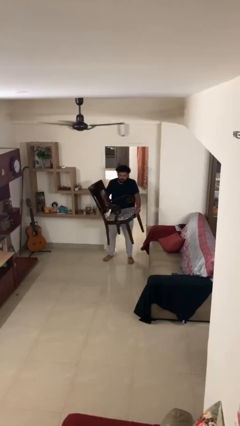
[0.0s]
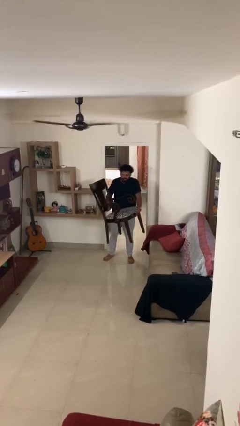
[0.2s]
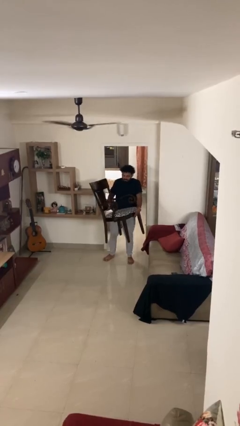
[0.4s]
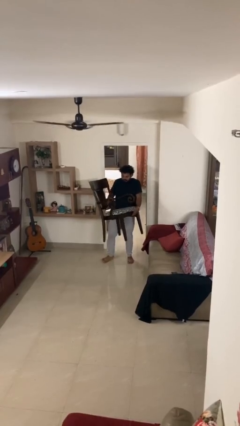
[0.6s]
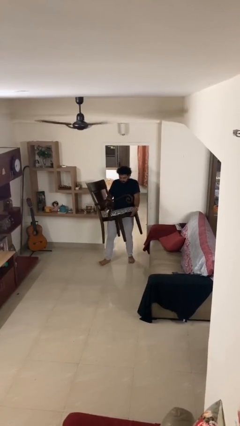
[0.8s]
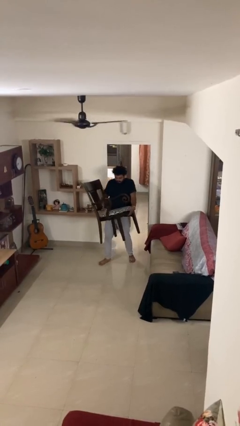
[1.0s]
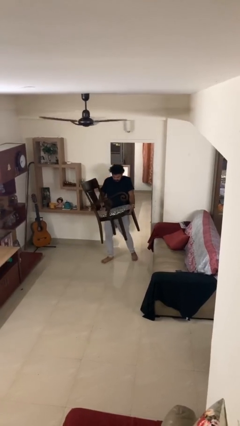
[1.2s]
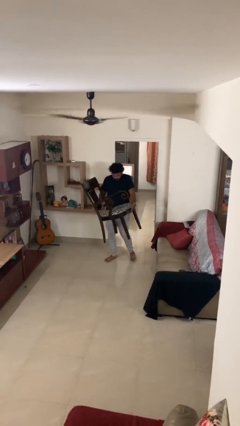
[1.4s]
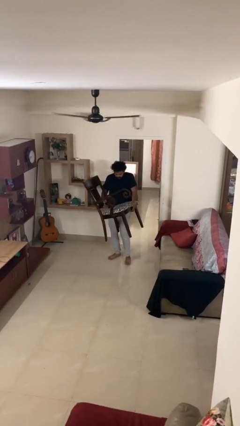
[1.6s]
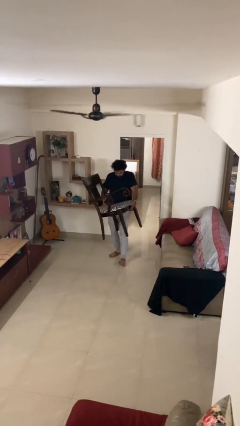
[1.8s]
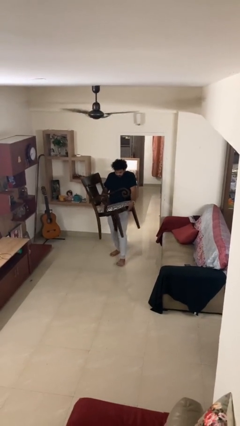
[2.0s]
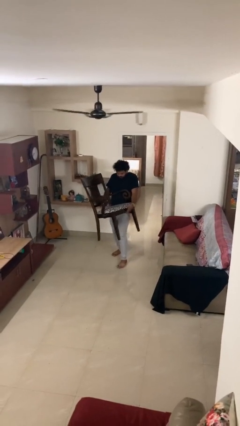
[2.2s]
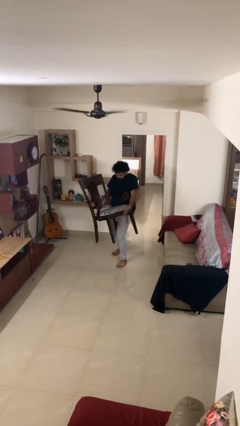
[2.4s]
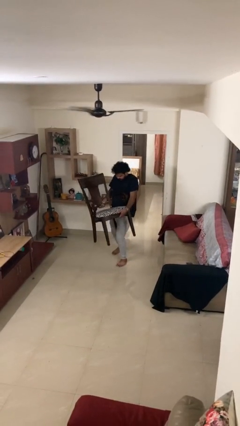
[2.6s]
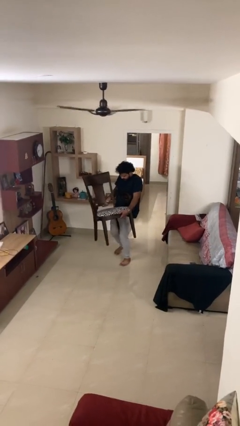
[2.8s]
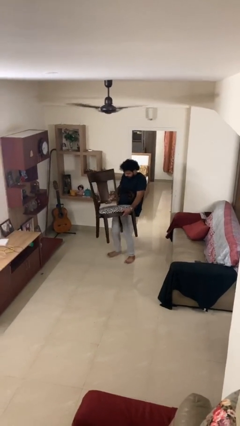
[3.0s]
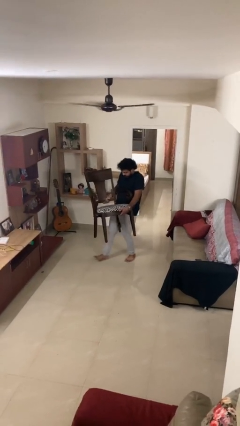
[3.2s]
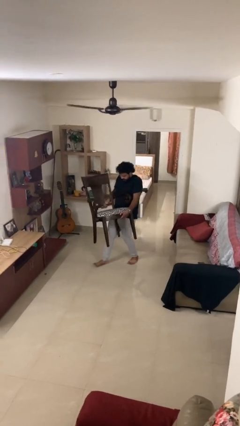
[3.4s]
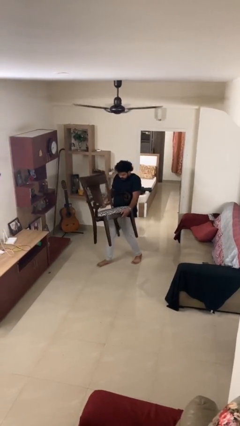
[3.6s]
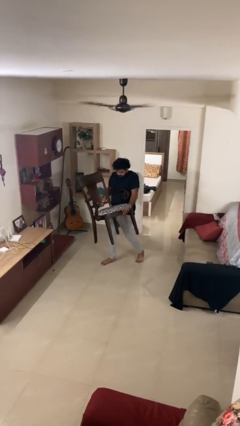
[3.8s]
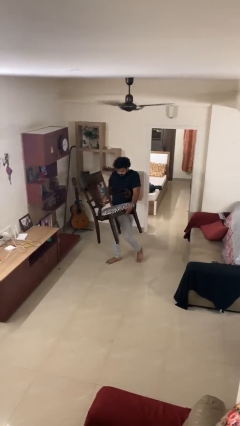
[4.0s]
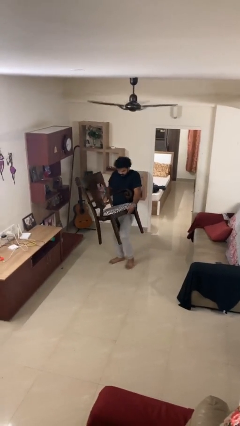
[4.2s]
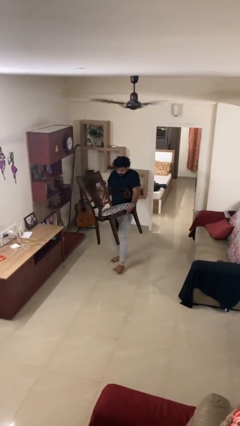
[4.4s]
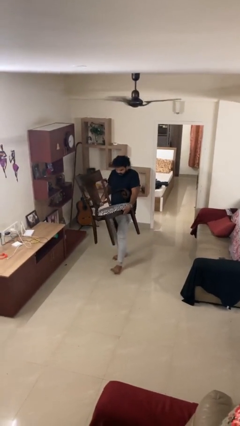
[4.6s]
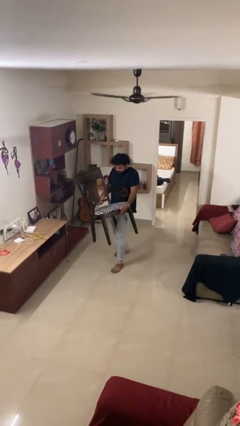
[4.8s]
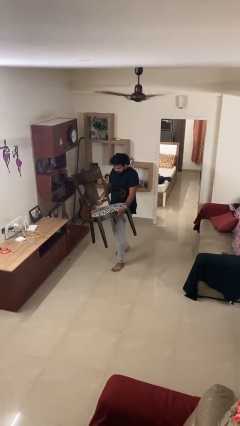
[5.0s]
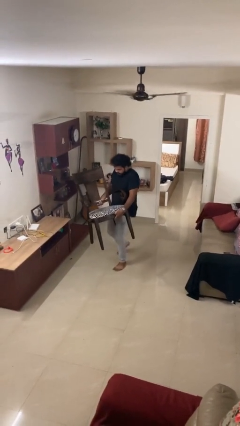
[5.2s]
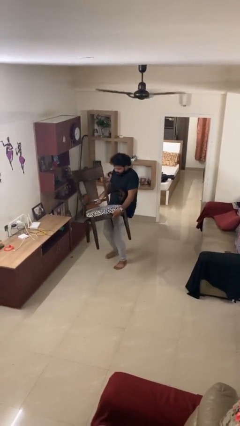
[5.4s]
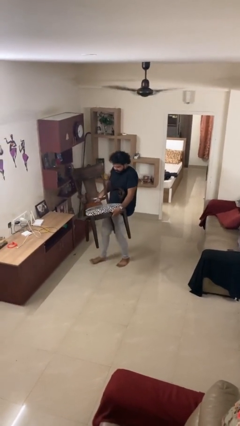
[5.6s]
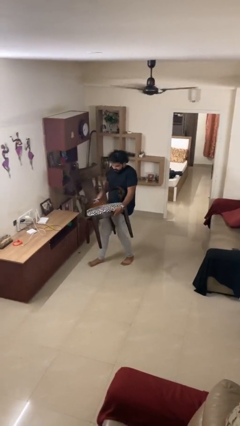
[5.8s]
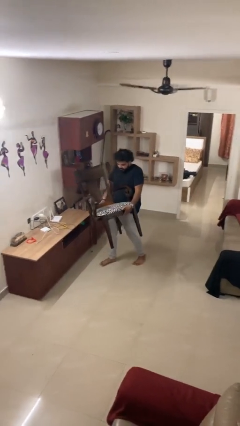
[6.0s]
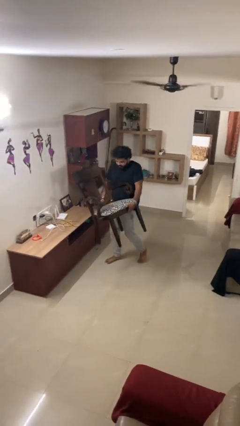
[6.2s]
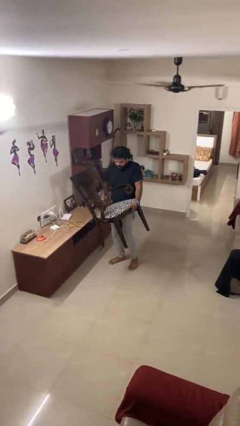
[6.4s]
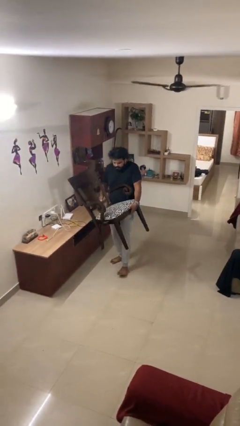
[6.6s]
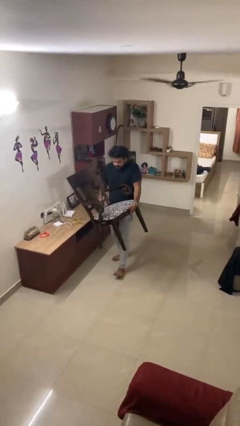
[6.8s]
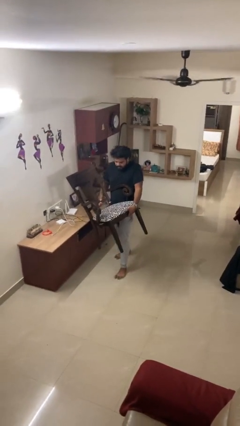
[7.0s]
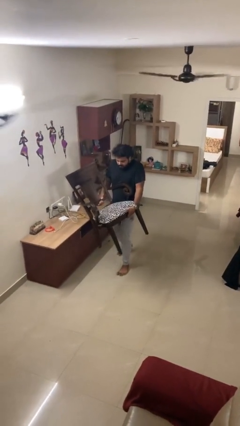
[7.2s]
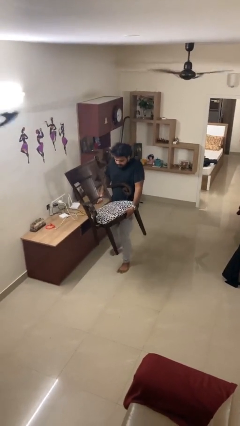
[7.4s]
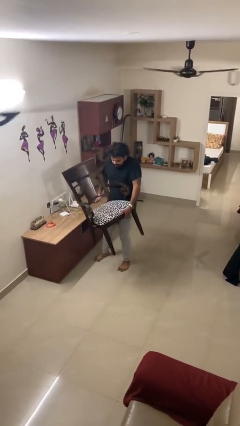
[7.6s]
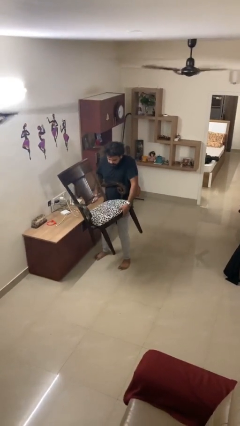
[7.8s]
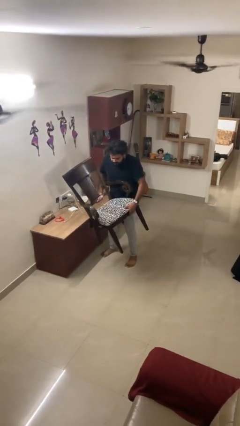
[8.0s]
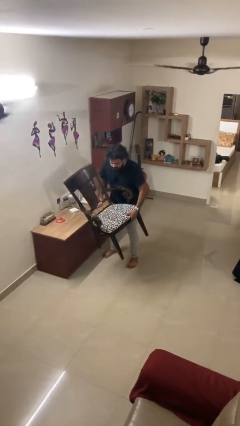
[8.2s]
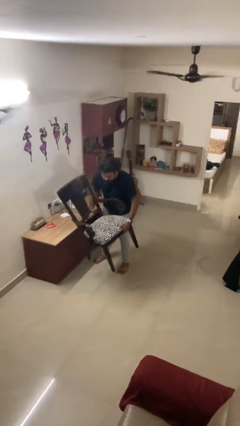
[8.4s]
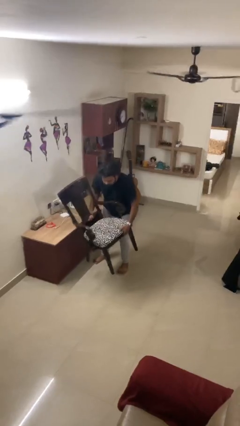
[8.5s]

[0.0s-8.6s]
person carries heavy object

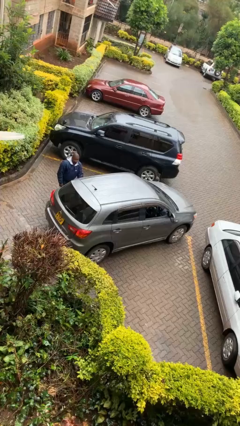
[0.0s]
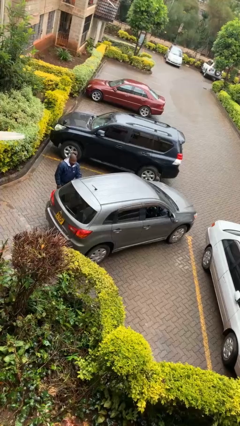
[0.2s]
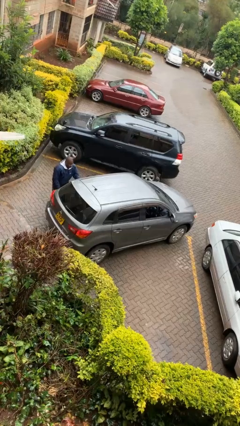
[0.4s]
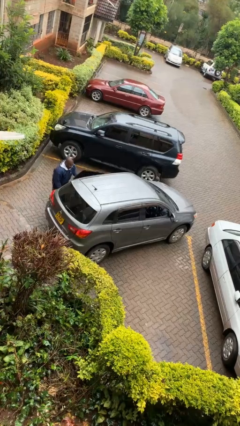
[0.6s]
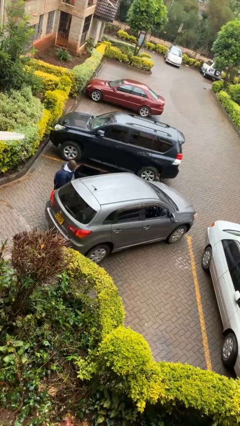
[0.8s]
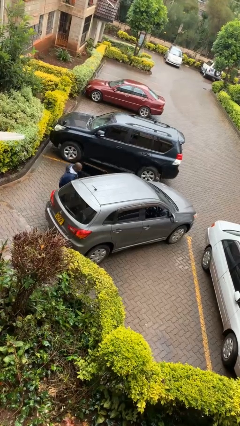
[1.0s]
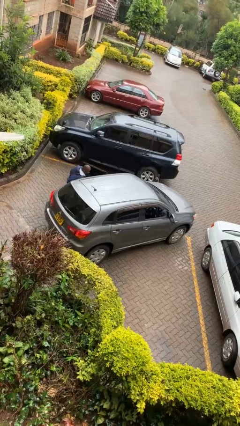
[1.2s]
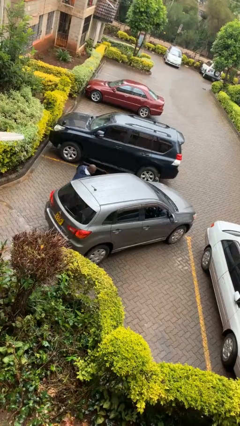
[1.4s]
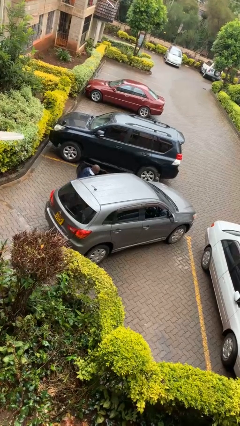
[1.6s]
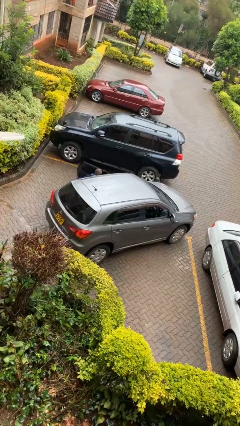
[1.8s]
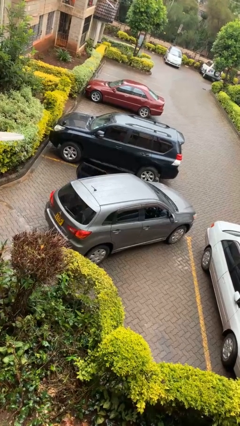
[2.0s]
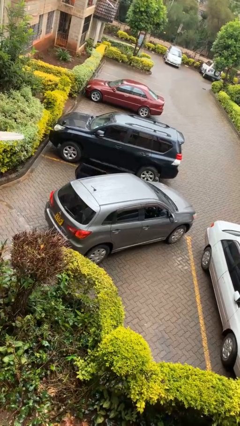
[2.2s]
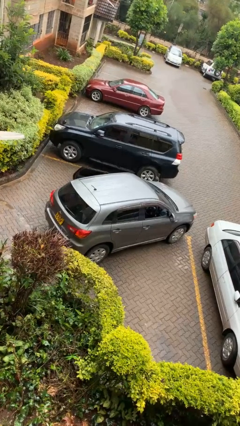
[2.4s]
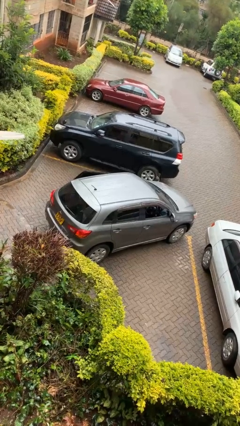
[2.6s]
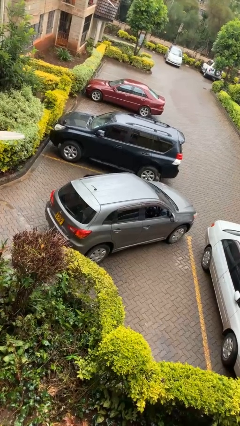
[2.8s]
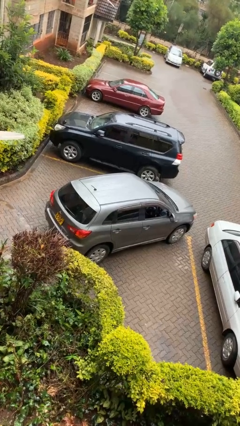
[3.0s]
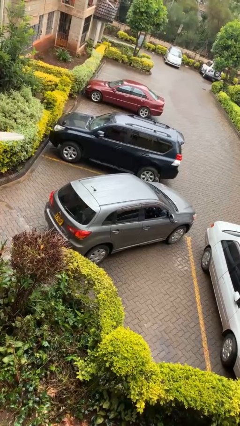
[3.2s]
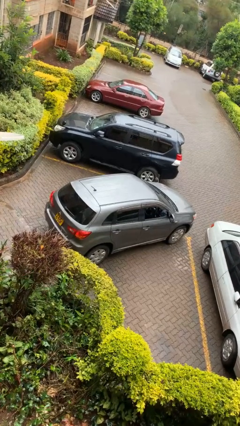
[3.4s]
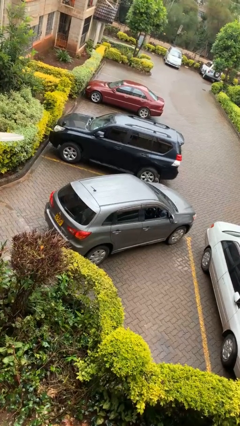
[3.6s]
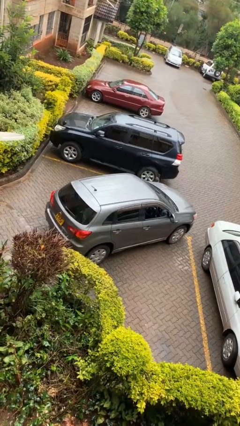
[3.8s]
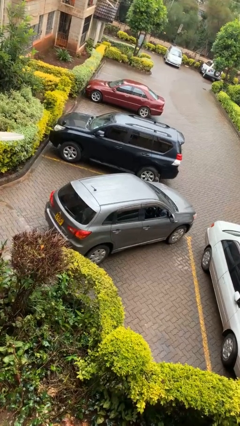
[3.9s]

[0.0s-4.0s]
car picks up person

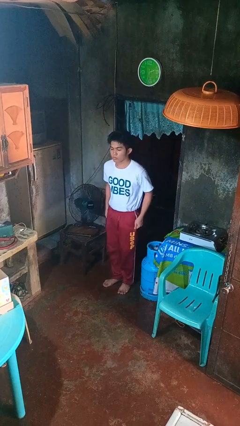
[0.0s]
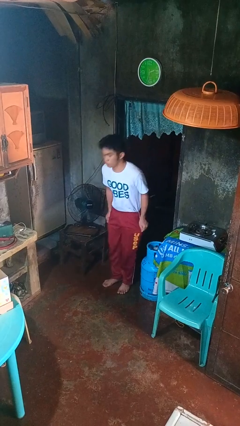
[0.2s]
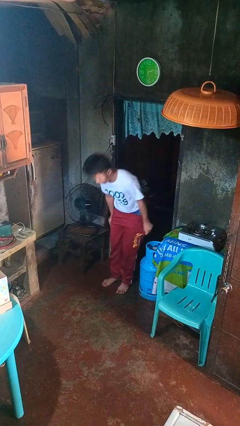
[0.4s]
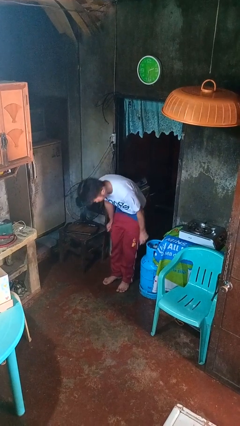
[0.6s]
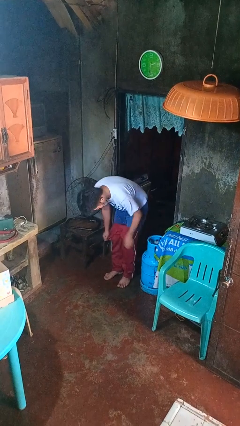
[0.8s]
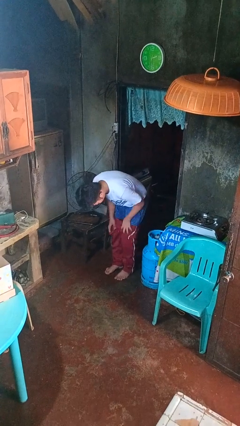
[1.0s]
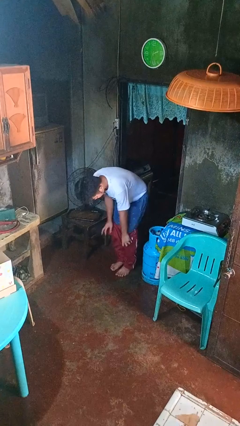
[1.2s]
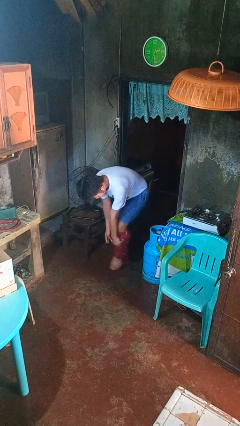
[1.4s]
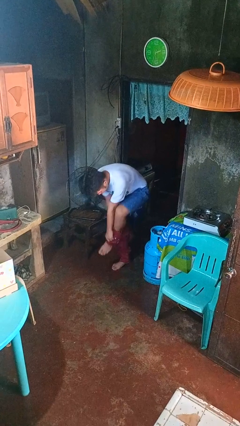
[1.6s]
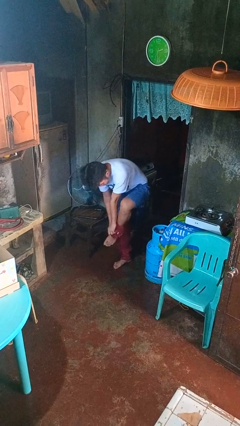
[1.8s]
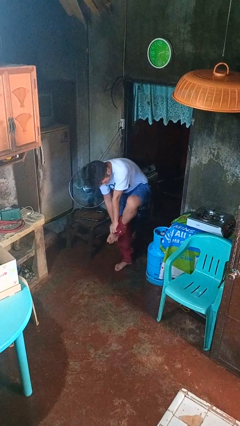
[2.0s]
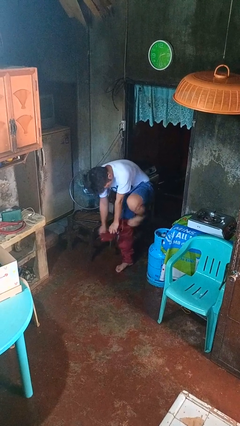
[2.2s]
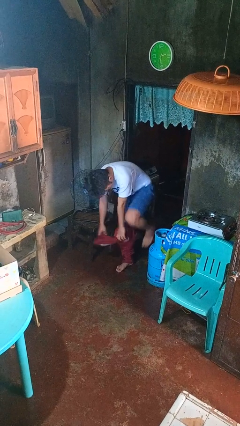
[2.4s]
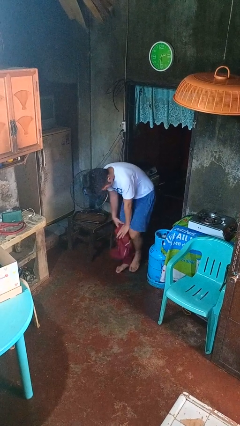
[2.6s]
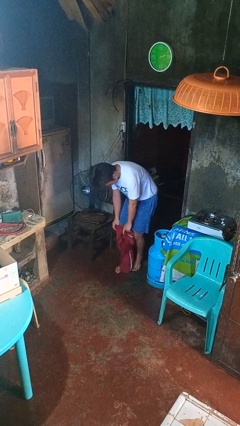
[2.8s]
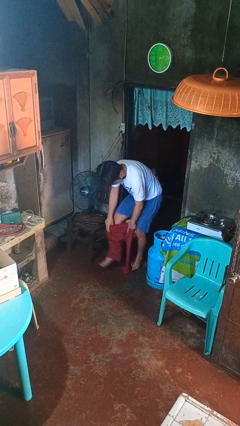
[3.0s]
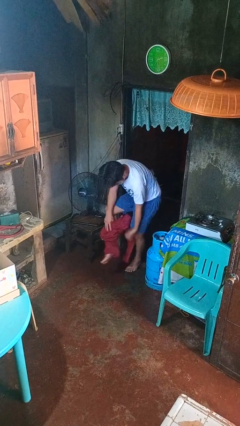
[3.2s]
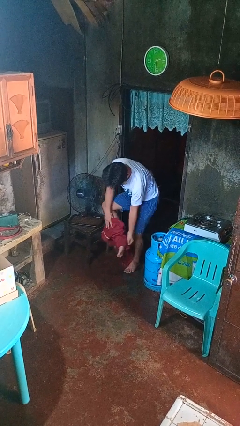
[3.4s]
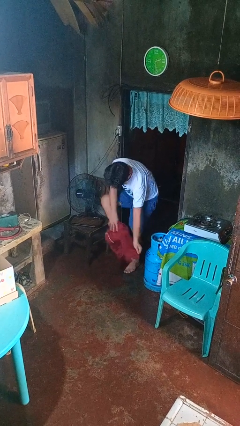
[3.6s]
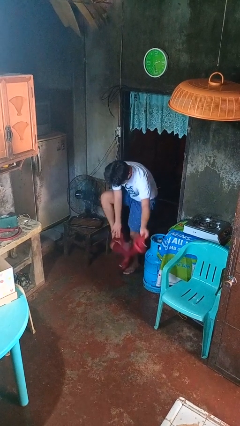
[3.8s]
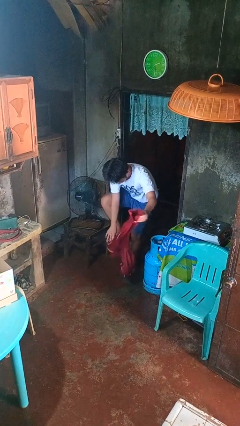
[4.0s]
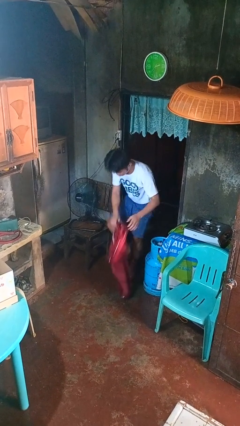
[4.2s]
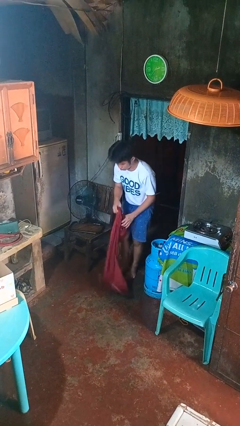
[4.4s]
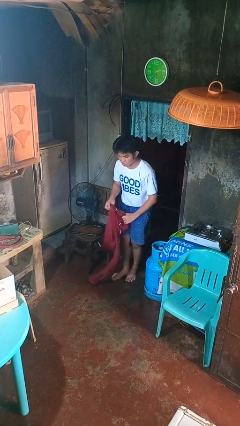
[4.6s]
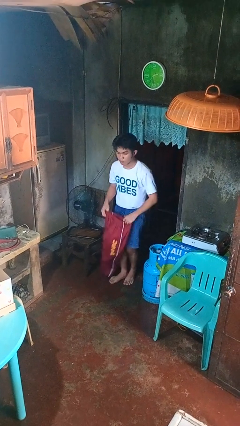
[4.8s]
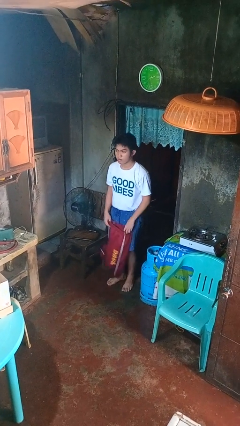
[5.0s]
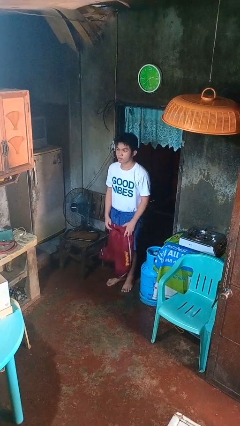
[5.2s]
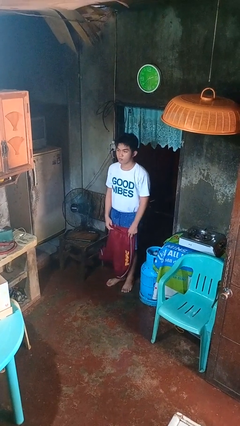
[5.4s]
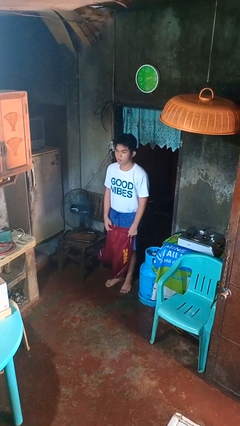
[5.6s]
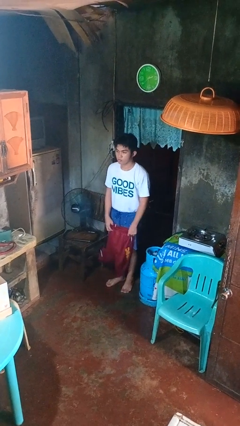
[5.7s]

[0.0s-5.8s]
person takes off pants
